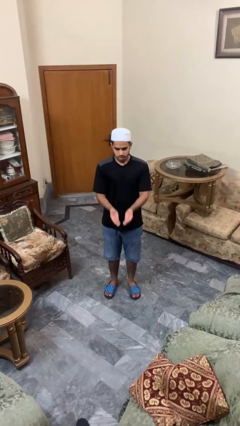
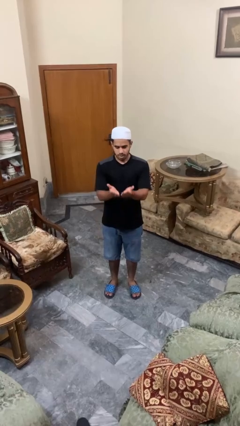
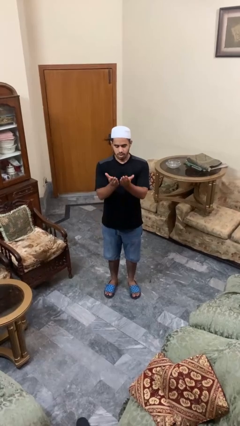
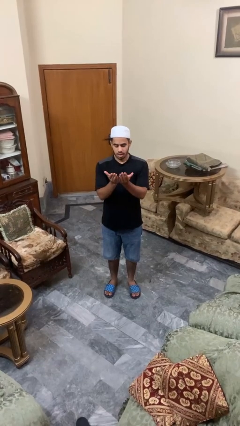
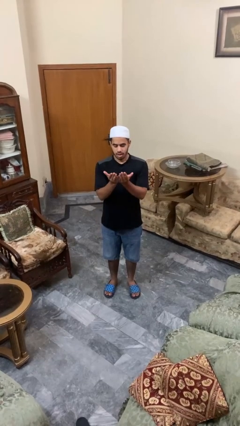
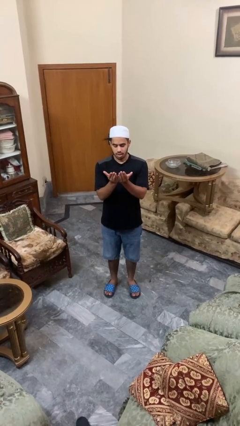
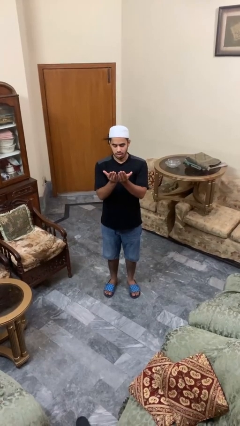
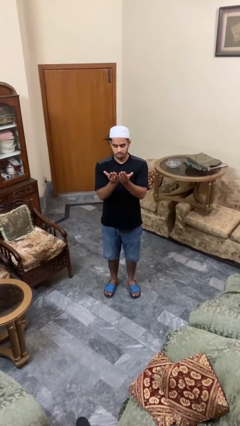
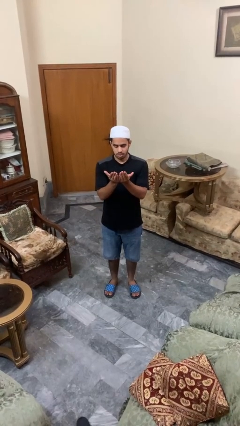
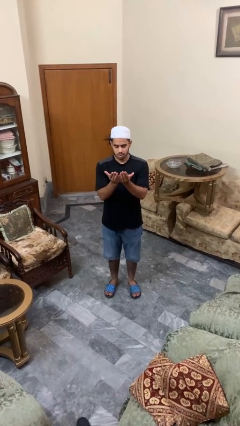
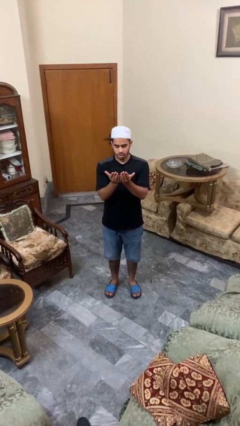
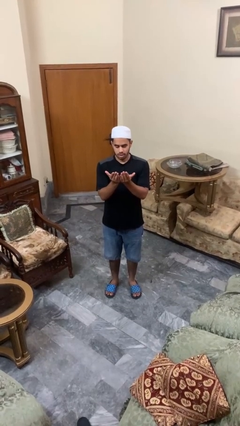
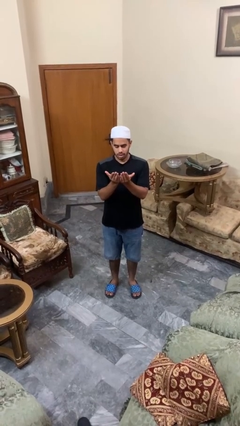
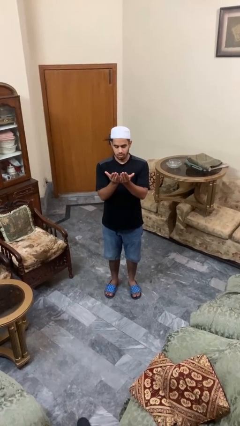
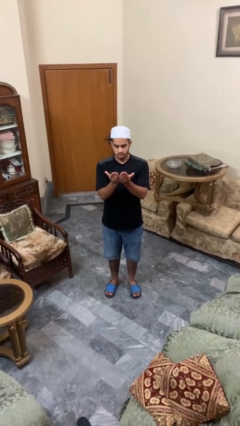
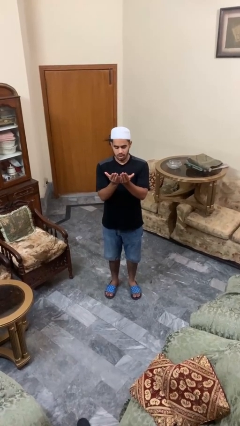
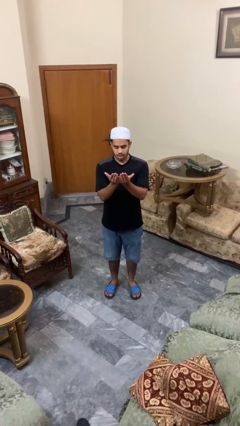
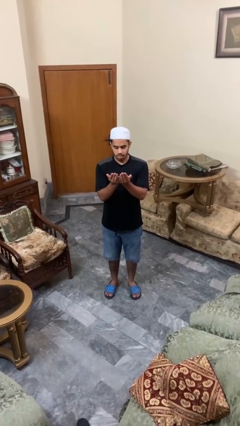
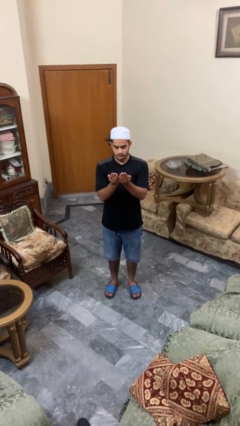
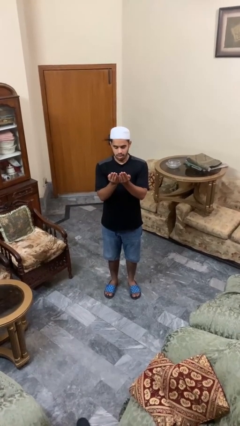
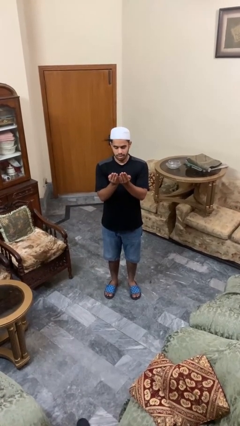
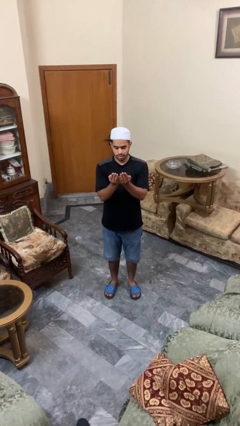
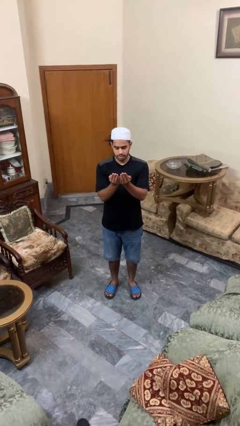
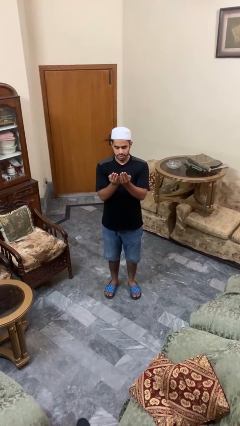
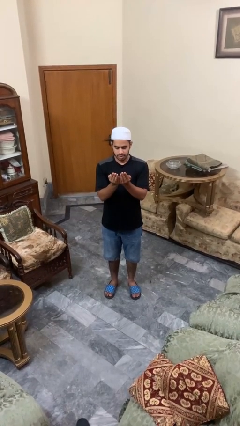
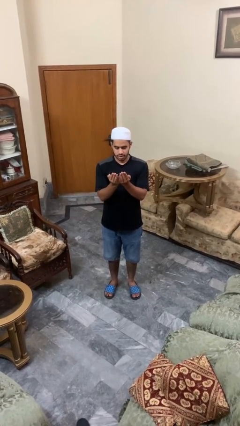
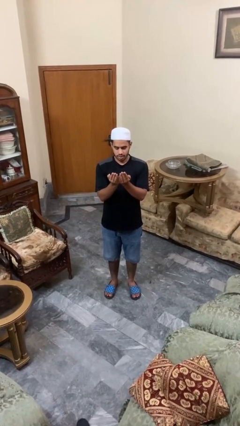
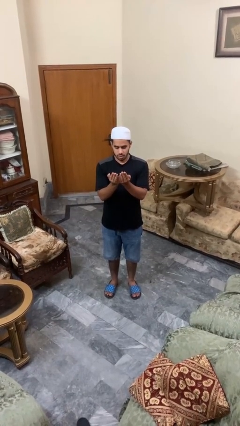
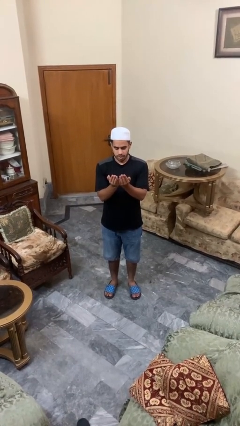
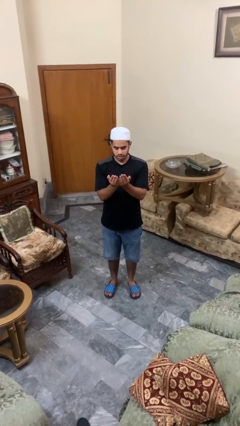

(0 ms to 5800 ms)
person prays

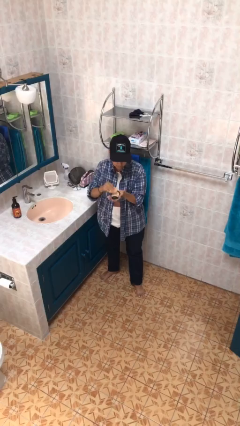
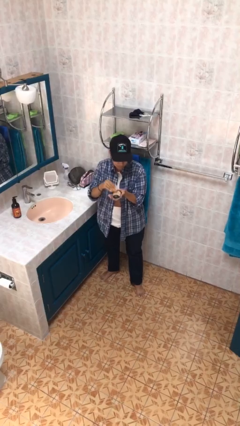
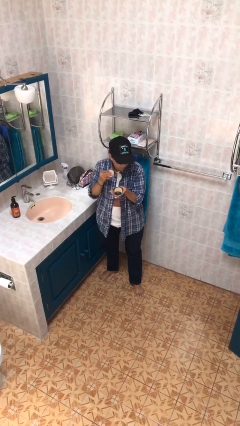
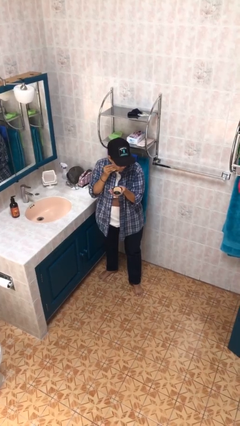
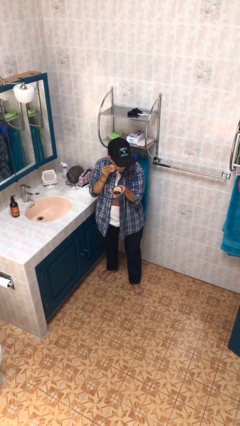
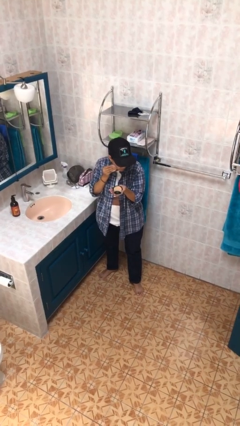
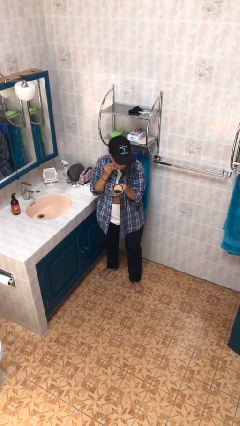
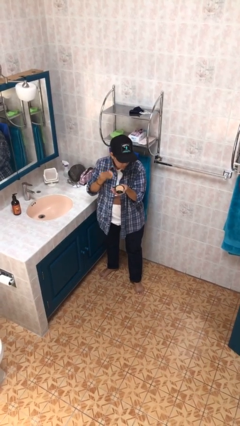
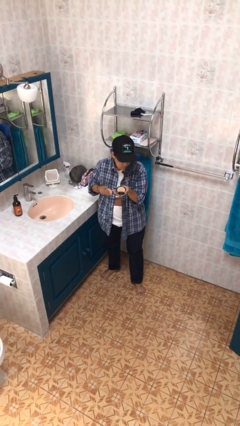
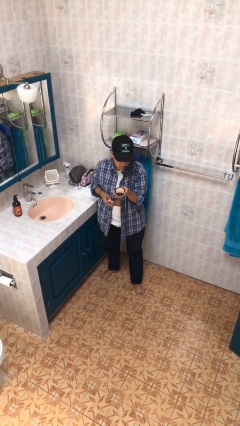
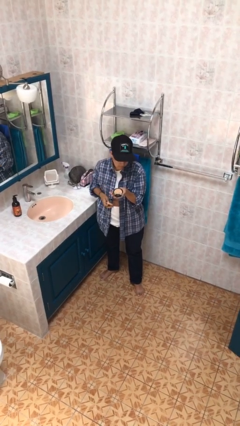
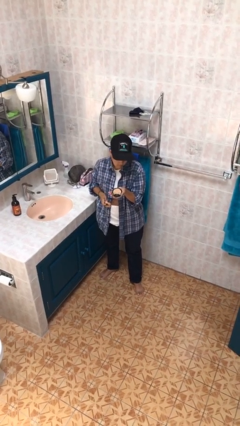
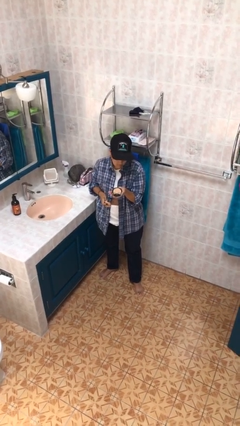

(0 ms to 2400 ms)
person applies foundation makeup

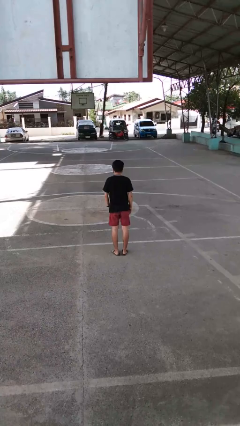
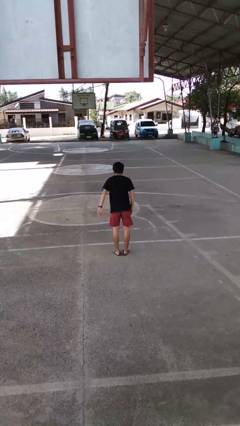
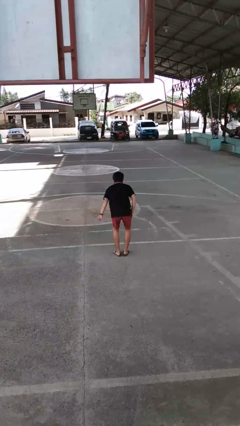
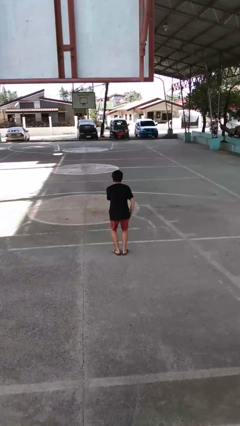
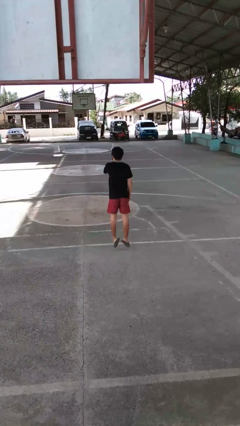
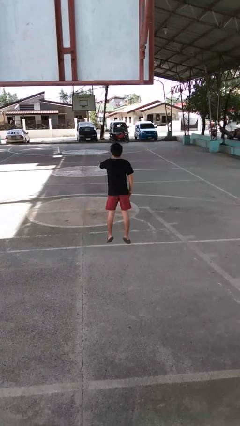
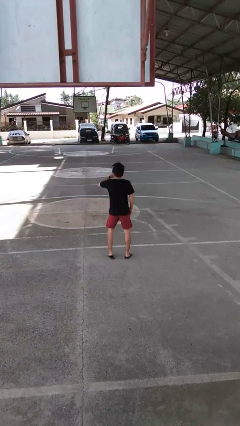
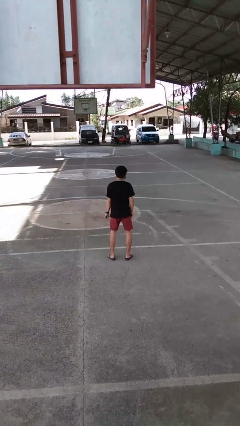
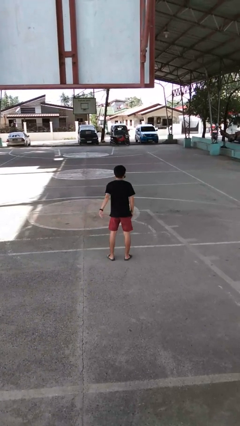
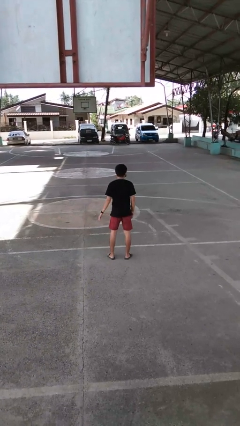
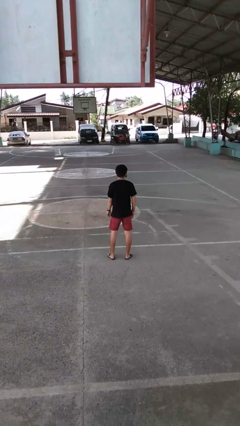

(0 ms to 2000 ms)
person jumps

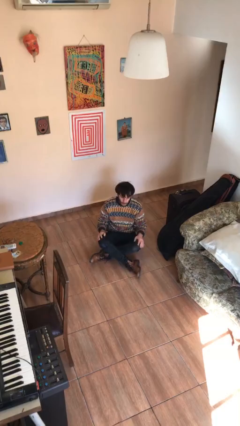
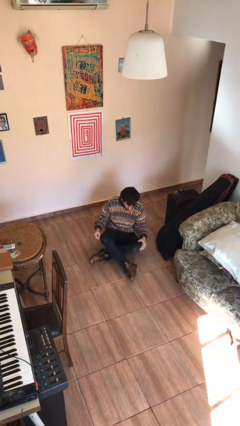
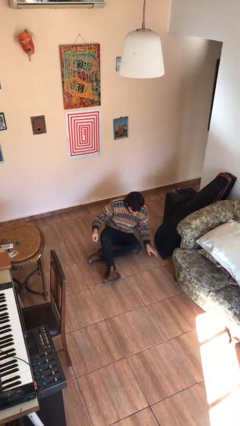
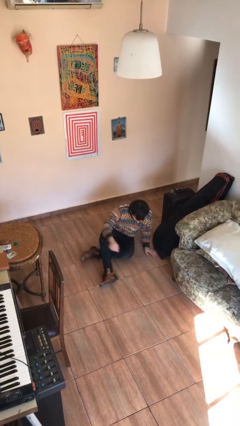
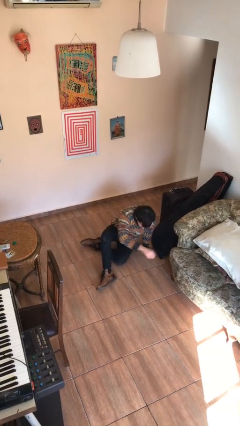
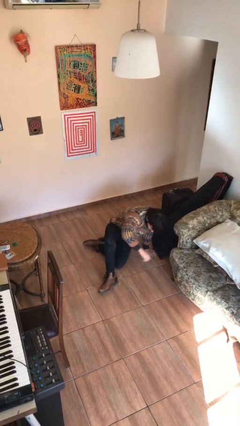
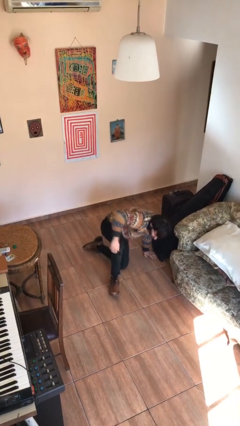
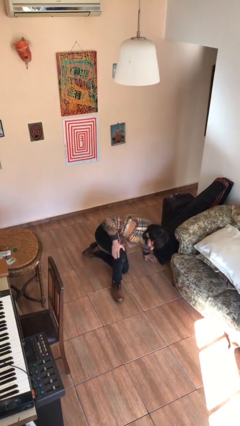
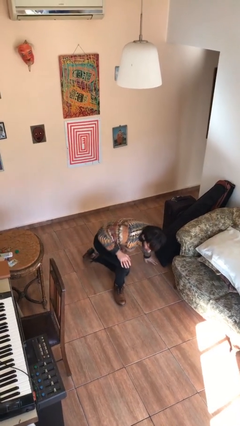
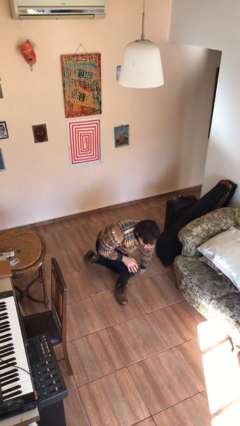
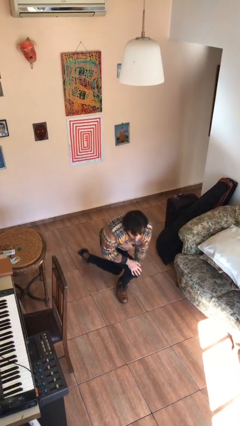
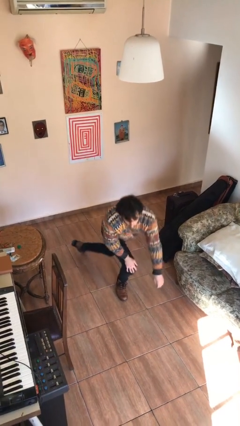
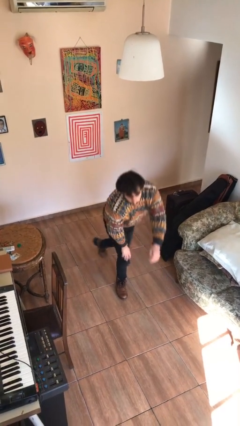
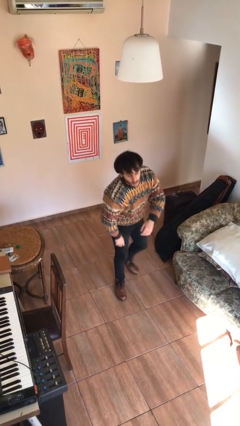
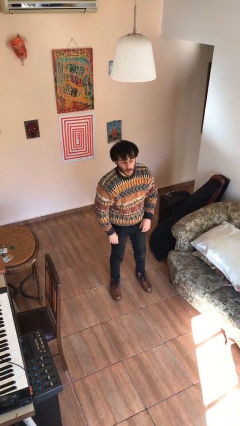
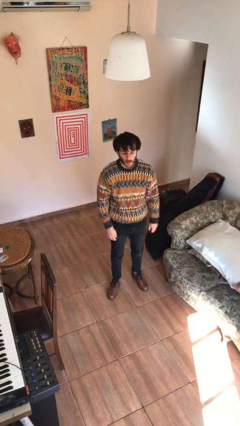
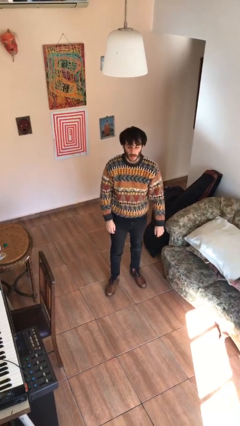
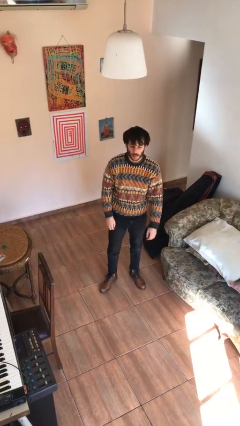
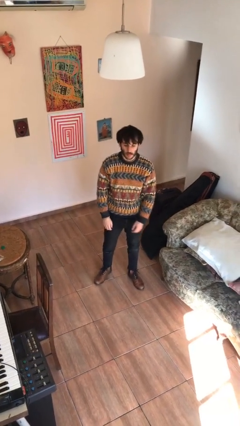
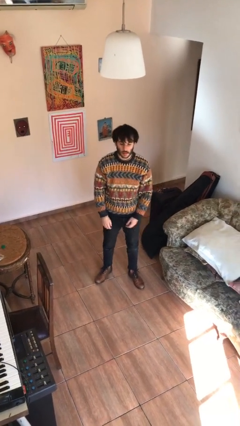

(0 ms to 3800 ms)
person stands up from floor

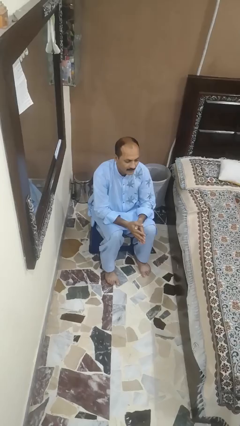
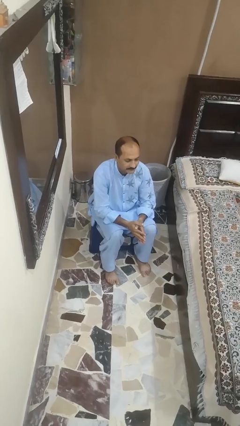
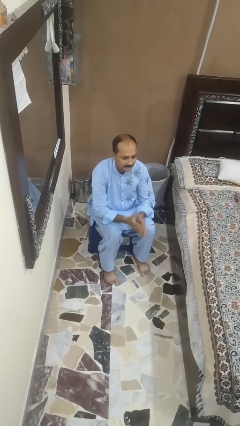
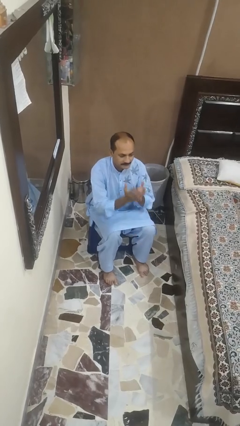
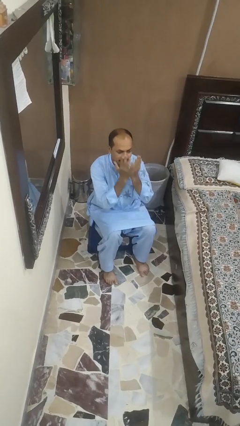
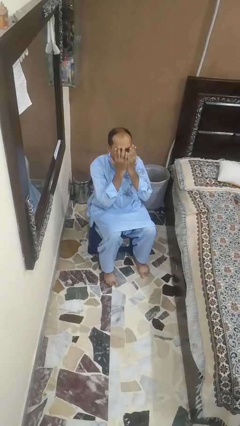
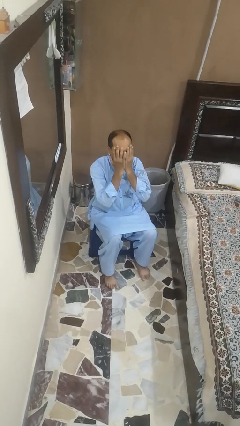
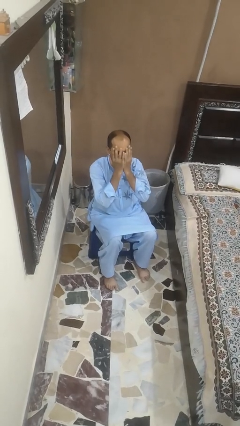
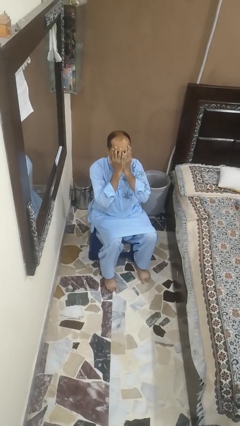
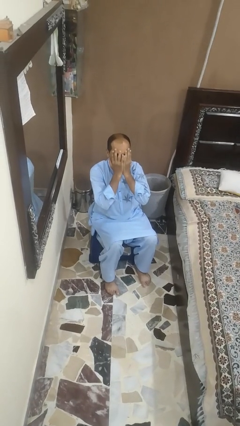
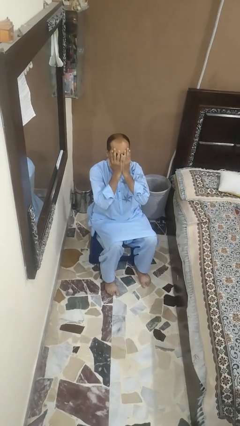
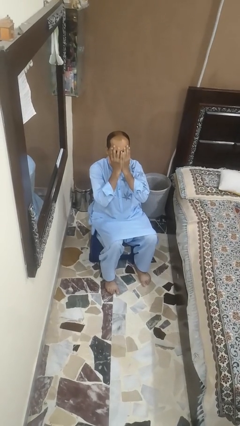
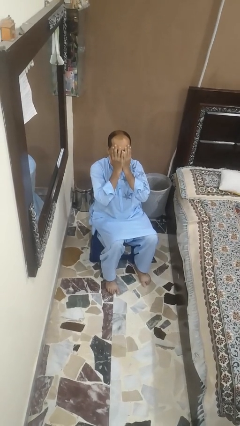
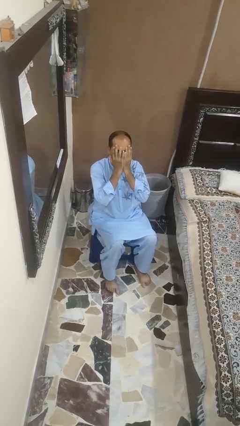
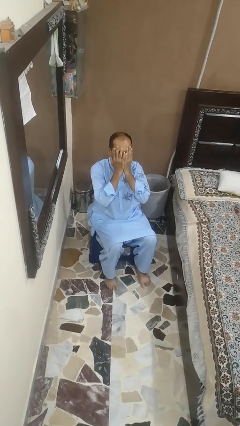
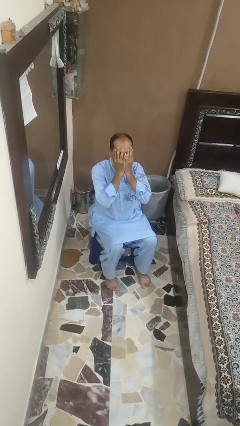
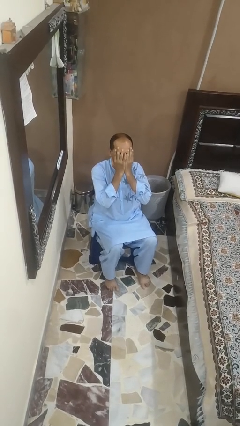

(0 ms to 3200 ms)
person covers face with hands
